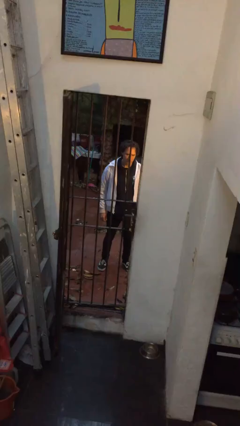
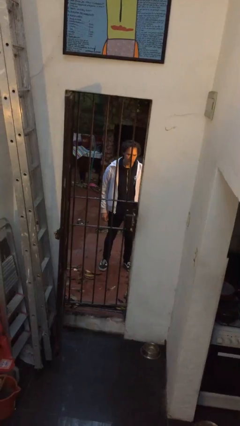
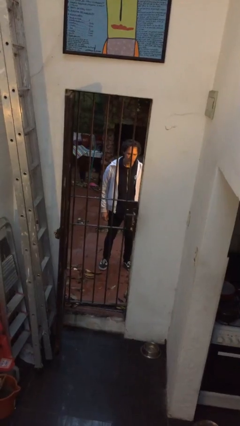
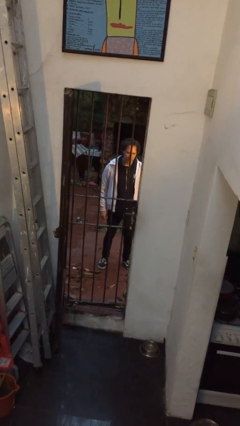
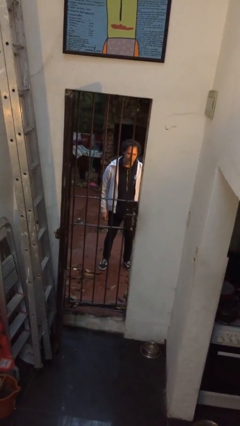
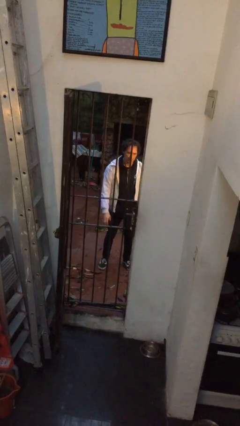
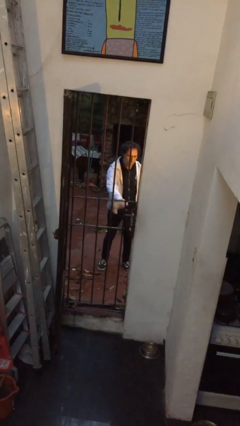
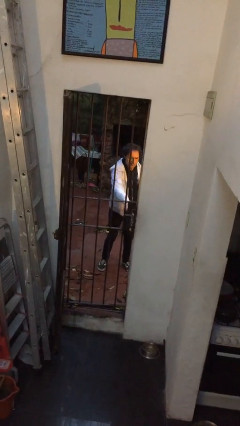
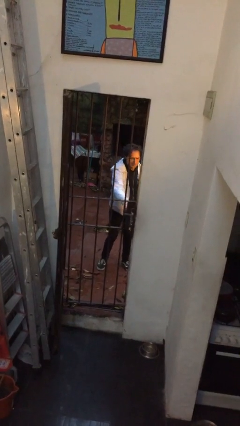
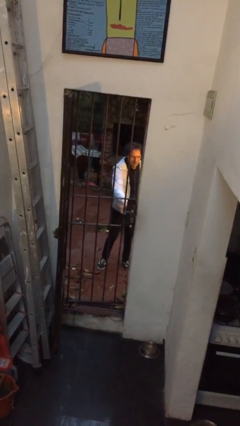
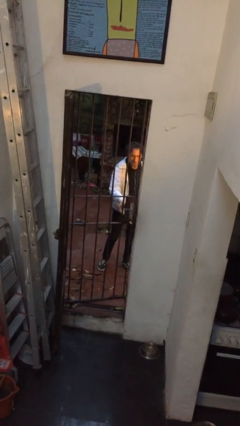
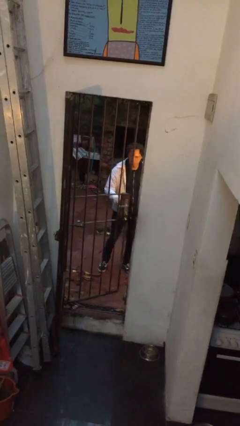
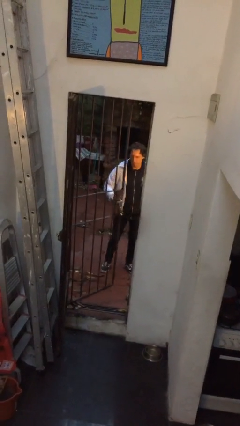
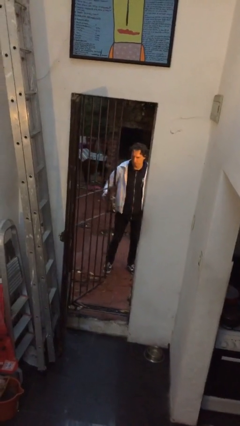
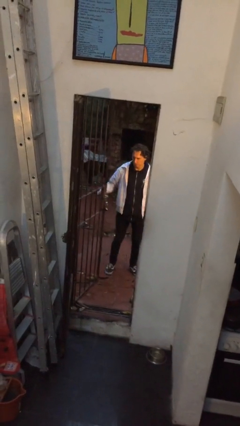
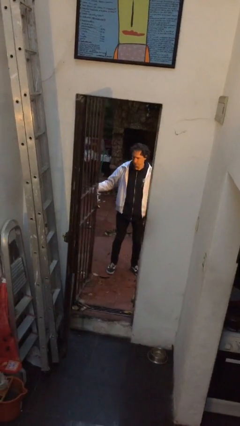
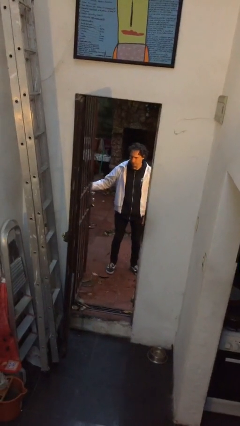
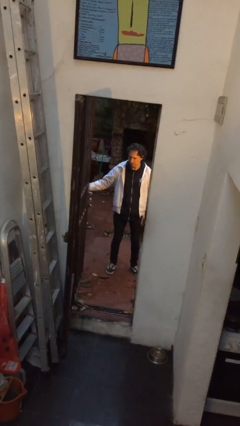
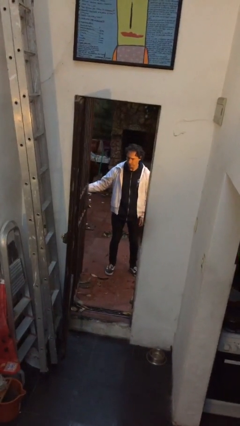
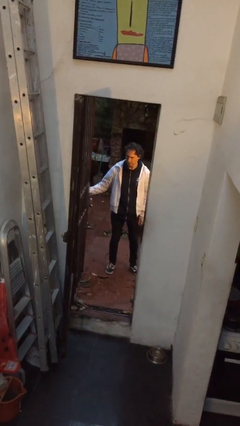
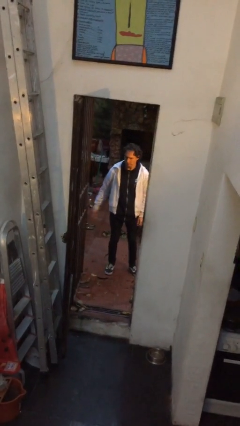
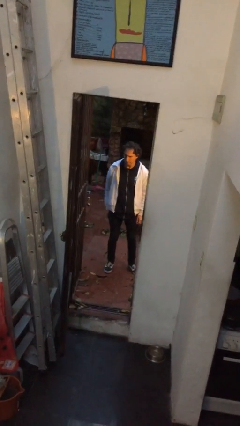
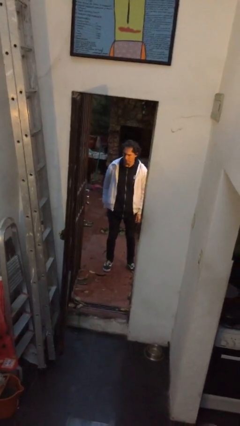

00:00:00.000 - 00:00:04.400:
person opens gate

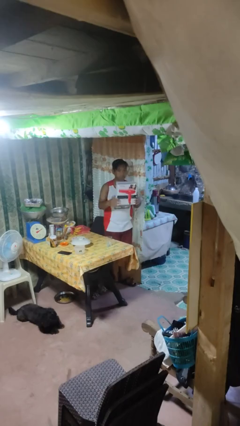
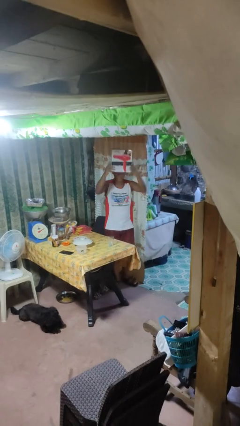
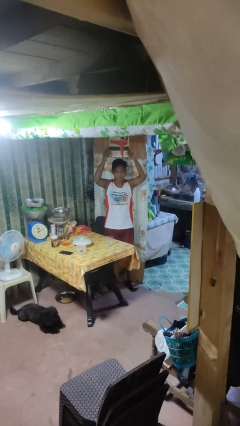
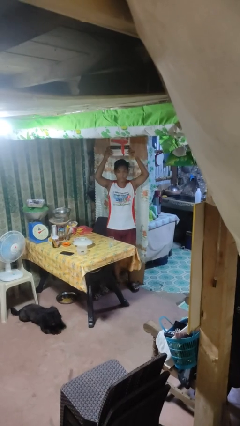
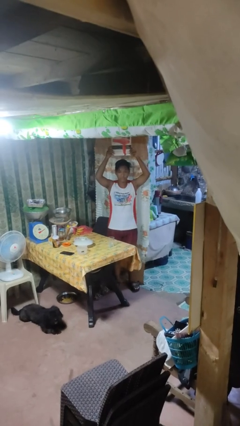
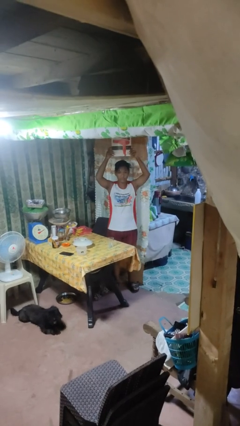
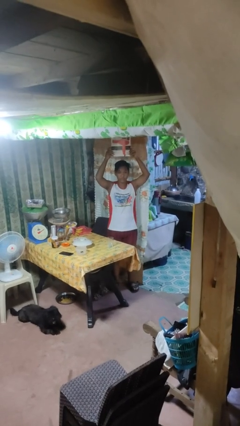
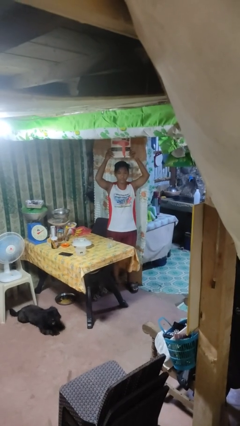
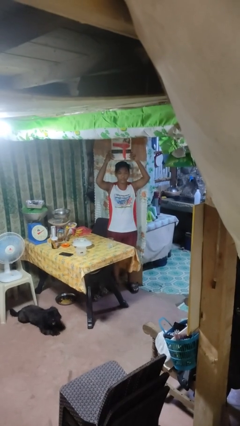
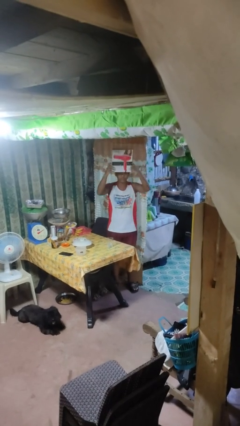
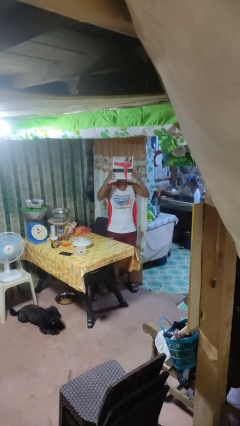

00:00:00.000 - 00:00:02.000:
person holds object above head

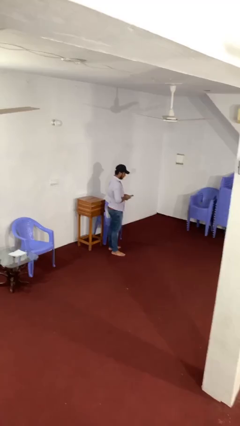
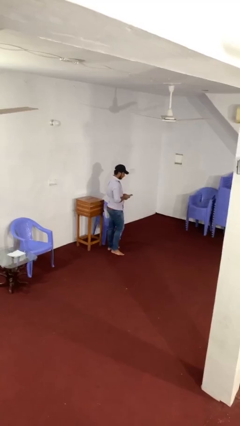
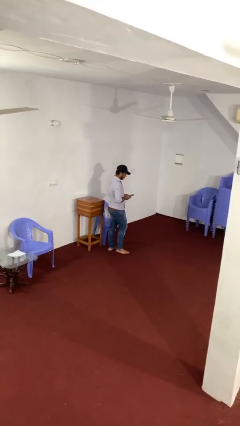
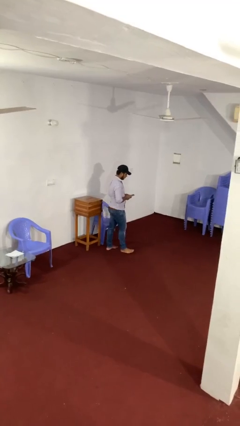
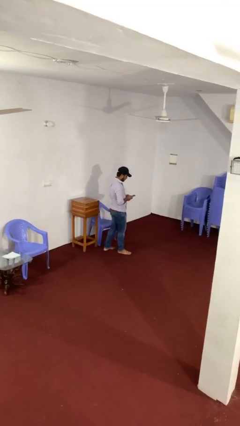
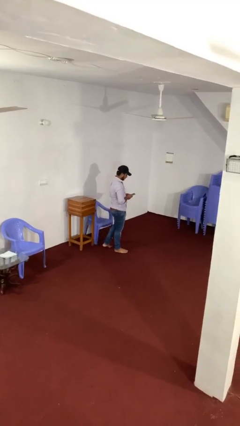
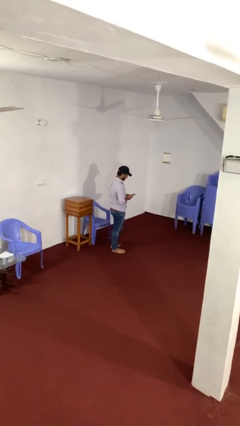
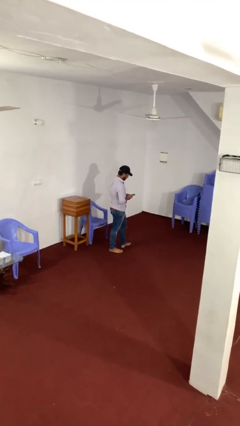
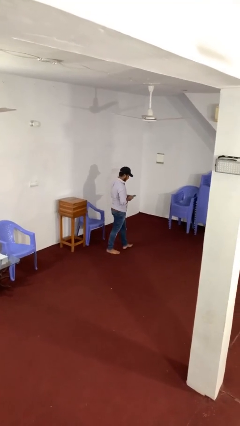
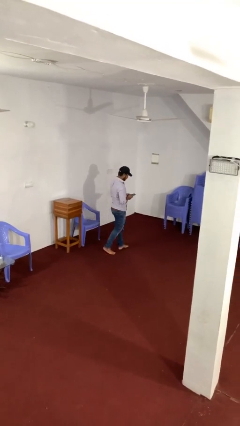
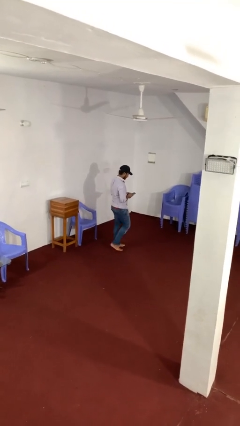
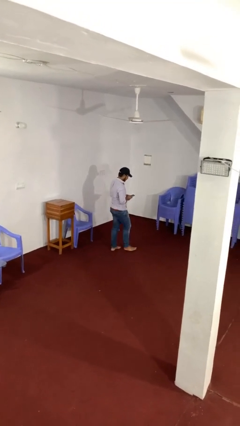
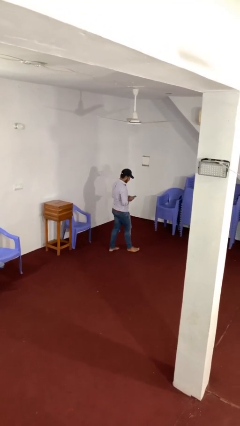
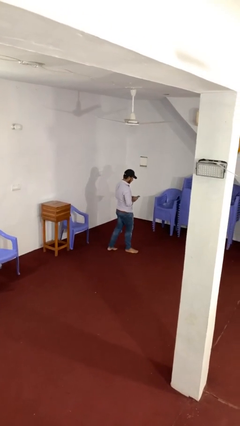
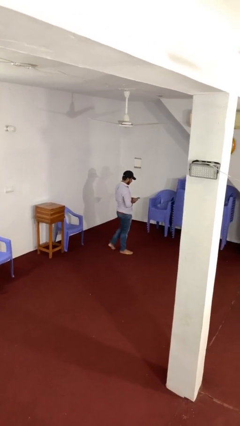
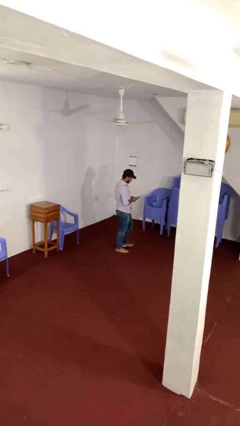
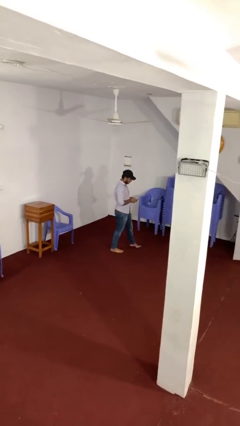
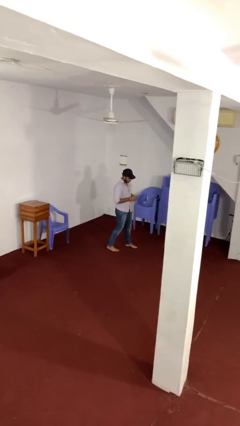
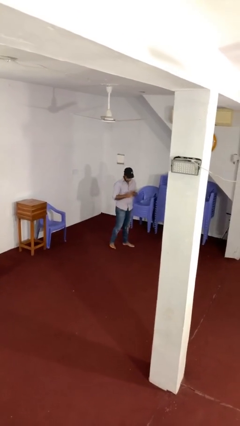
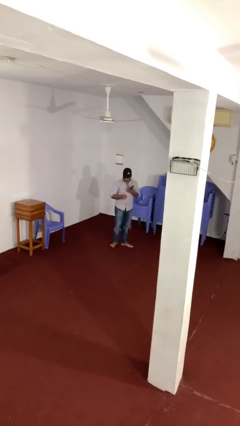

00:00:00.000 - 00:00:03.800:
person texts on phone

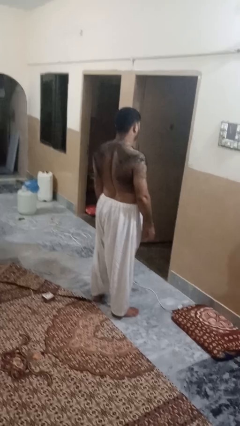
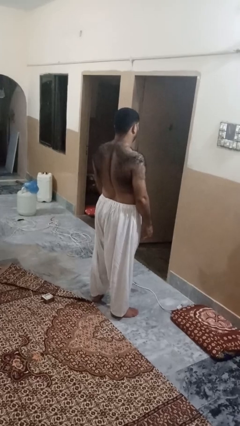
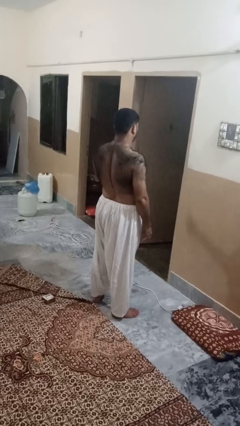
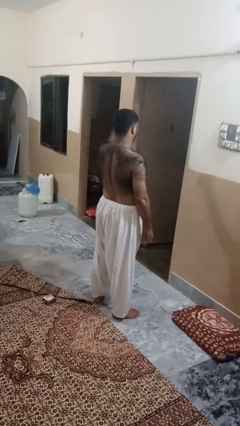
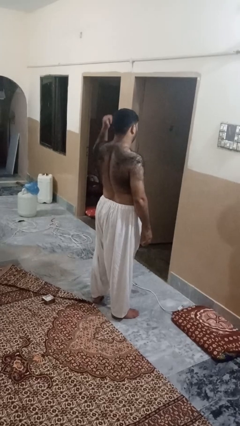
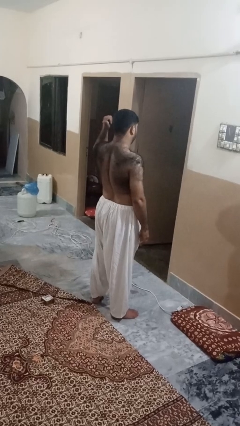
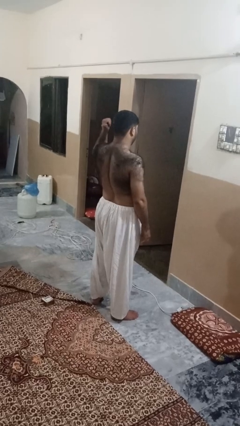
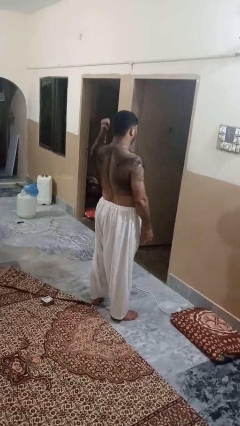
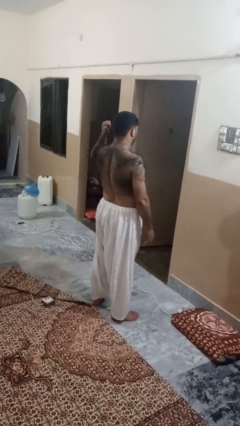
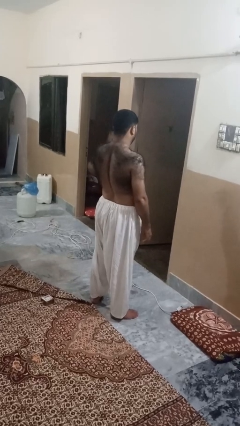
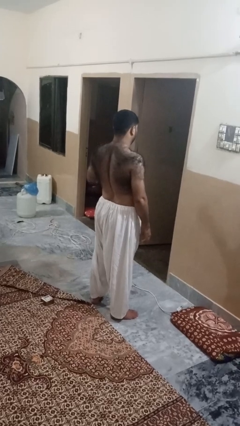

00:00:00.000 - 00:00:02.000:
person gestures behind me

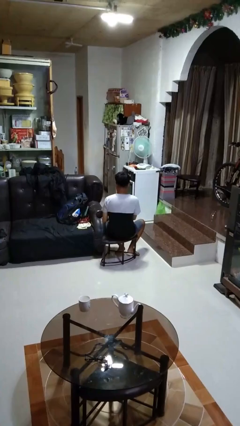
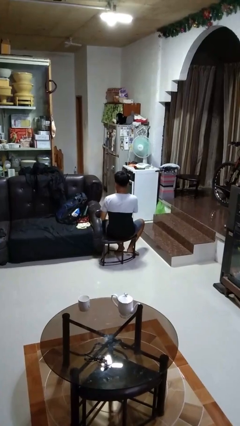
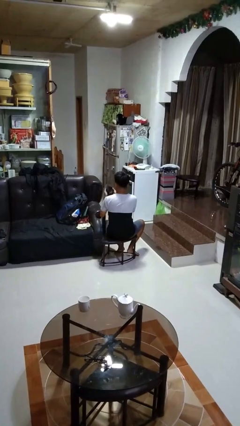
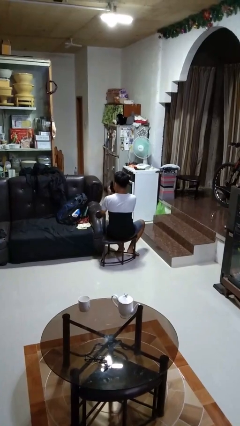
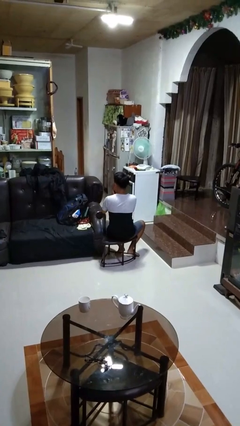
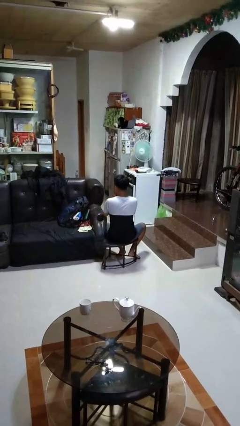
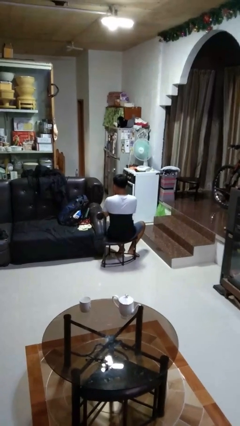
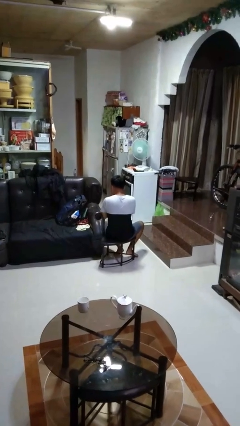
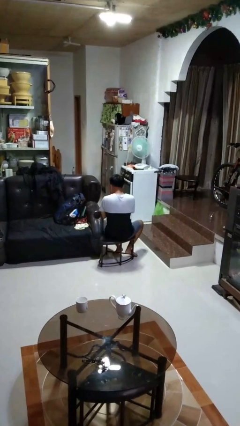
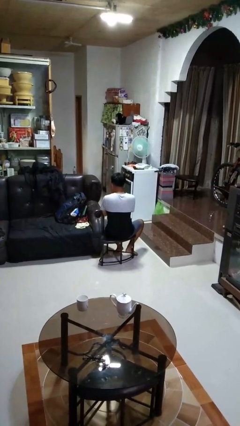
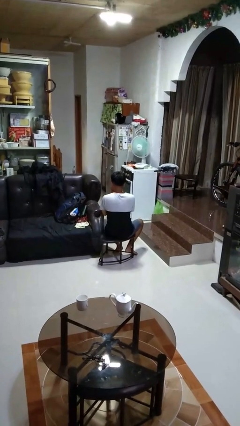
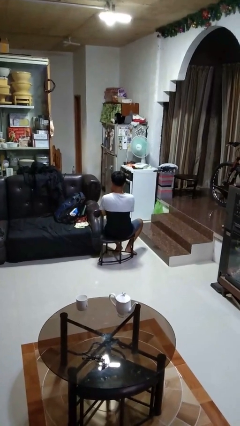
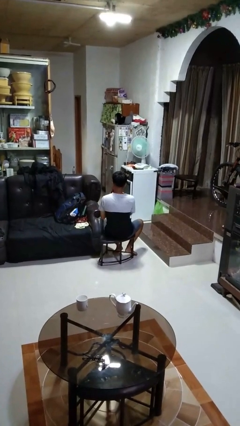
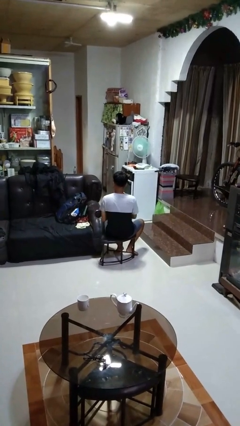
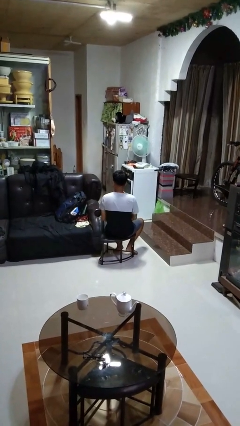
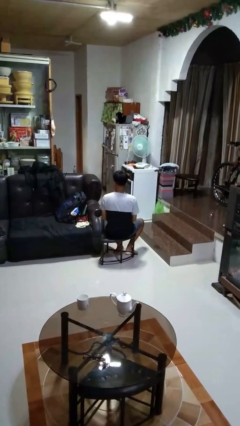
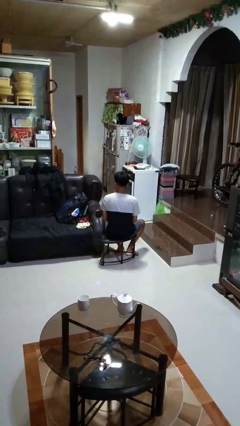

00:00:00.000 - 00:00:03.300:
person blows nose

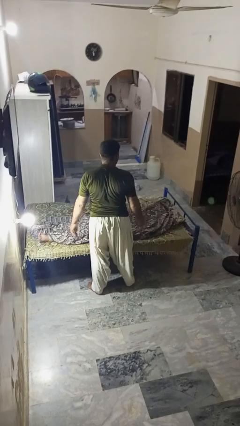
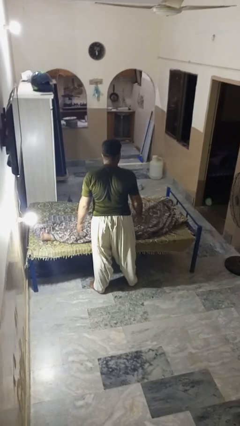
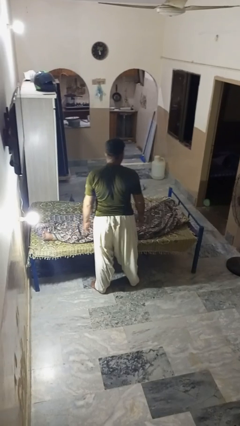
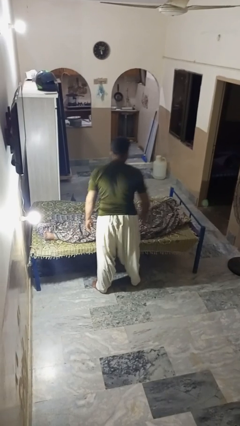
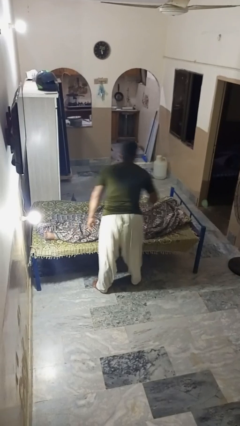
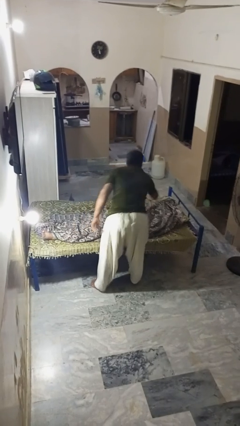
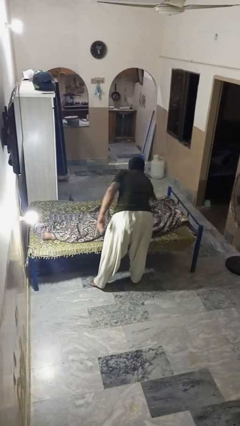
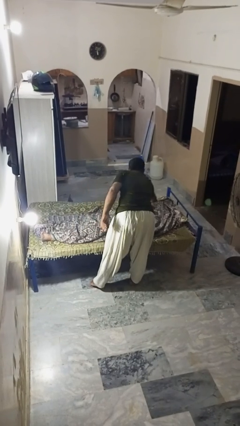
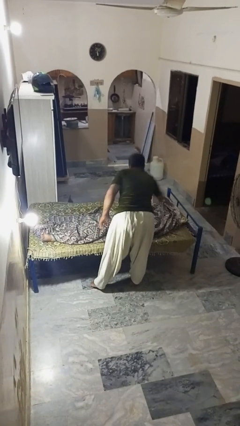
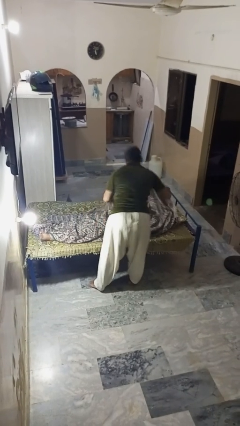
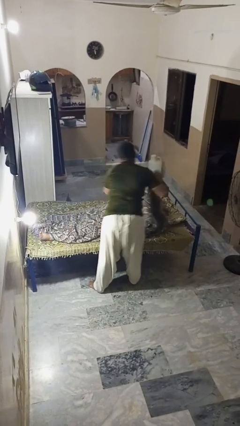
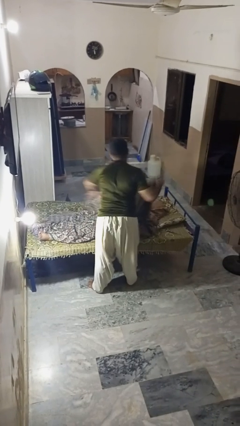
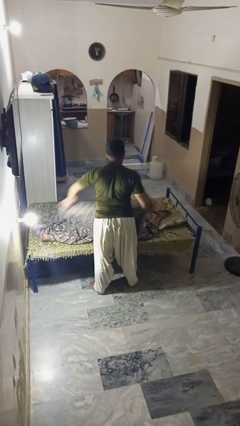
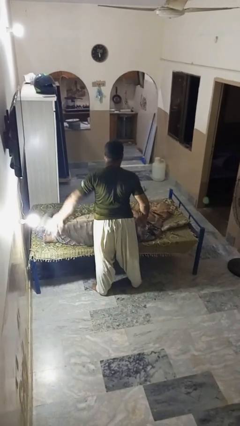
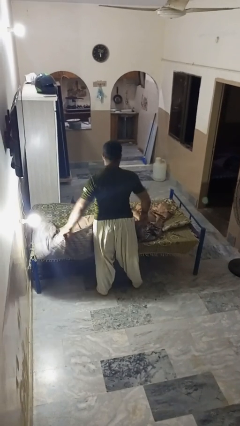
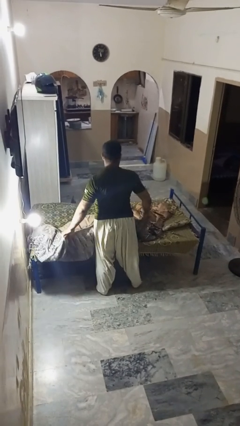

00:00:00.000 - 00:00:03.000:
person uncovers friend with blanket
